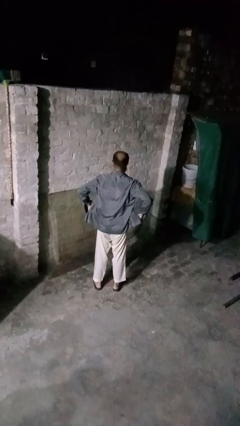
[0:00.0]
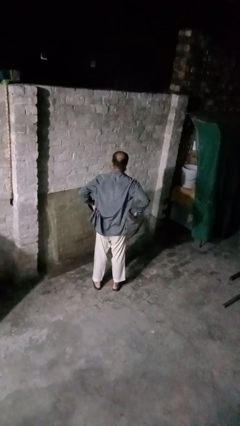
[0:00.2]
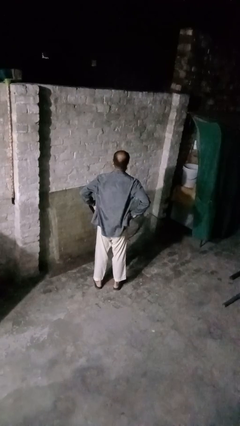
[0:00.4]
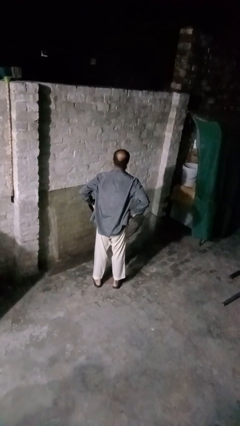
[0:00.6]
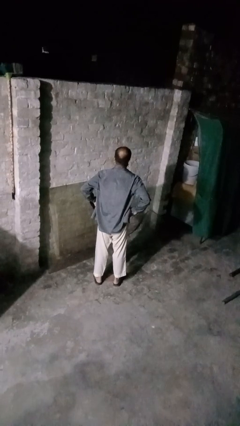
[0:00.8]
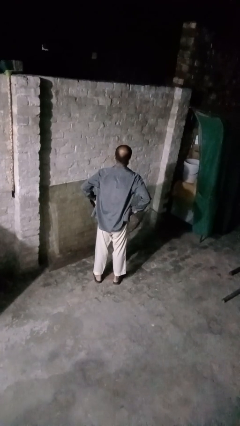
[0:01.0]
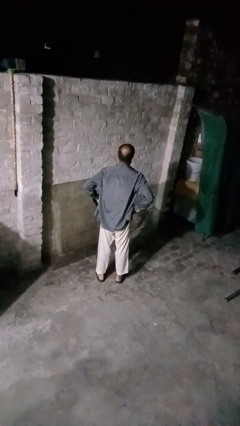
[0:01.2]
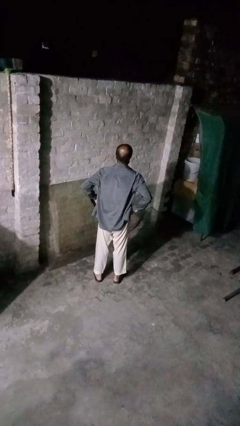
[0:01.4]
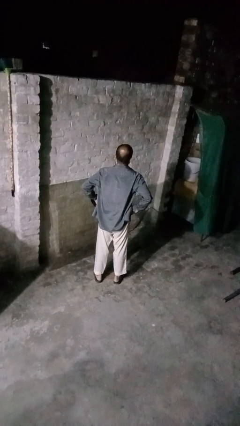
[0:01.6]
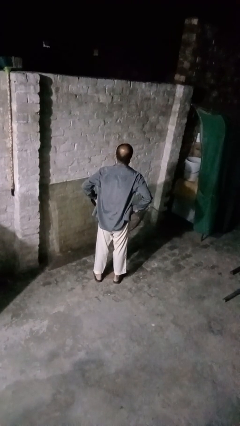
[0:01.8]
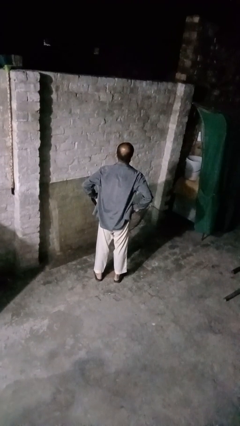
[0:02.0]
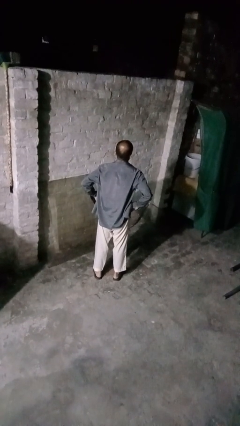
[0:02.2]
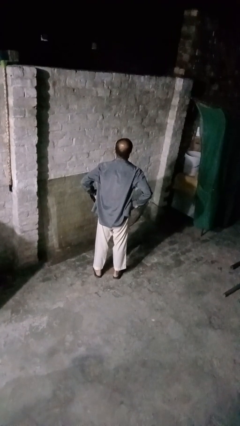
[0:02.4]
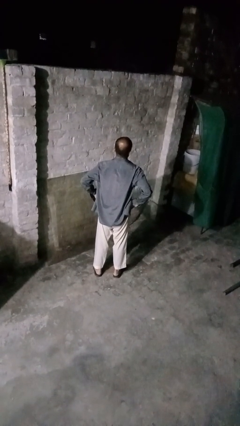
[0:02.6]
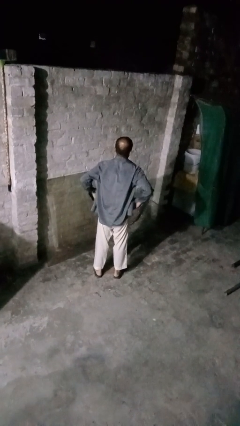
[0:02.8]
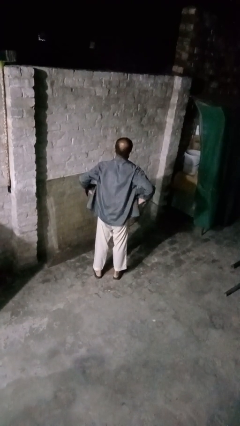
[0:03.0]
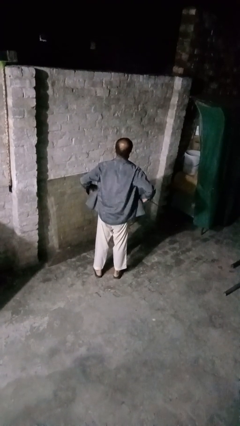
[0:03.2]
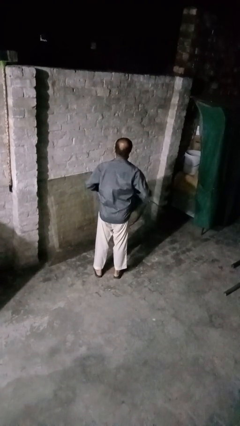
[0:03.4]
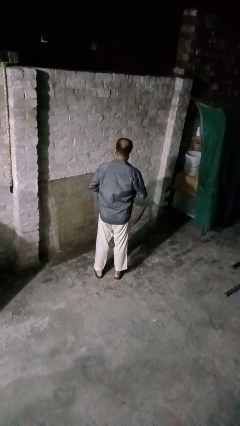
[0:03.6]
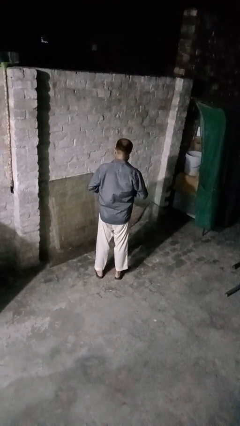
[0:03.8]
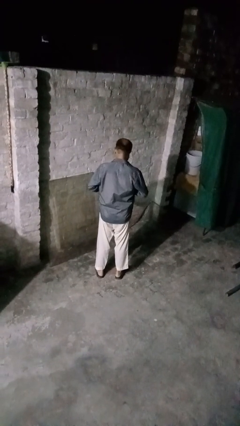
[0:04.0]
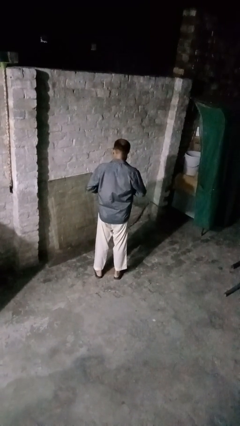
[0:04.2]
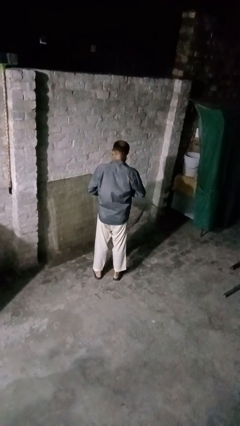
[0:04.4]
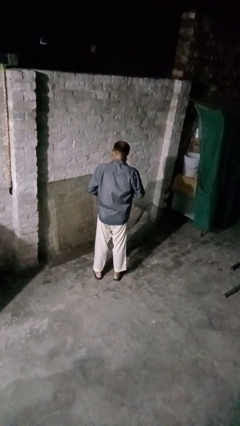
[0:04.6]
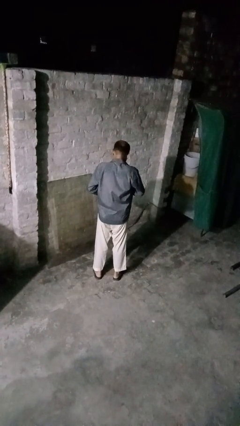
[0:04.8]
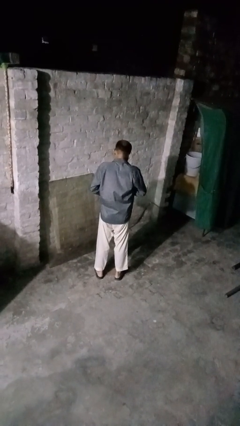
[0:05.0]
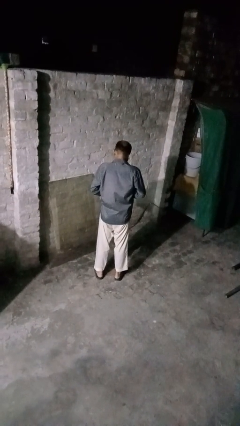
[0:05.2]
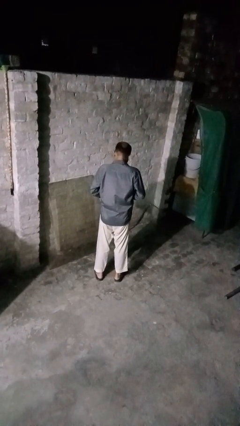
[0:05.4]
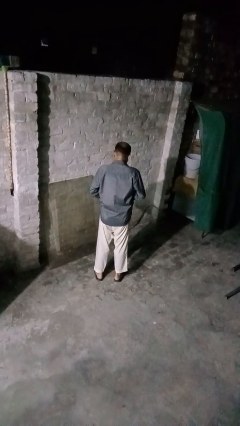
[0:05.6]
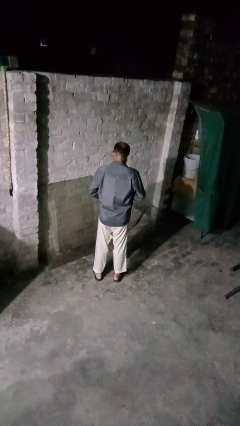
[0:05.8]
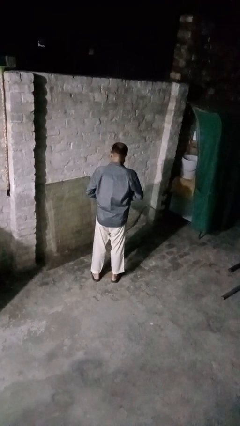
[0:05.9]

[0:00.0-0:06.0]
person buttons shirt

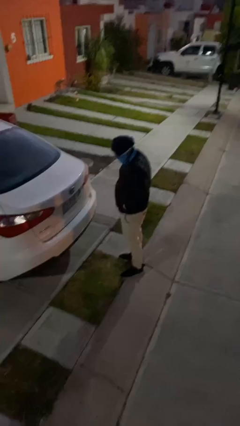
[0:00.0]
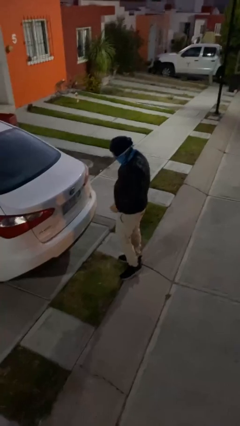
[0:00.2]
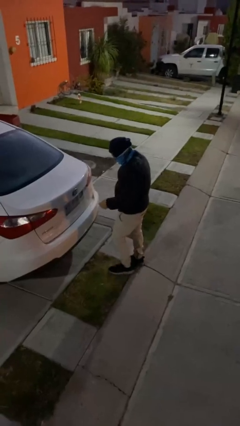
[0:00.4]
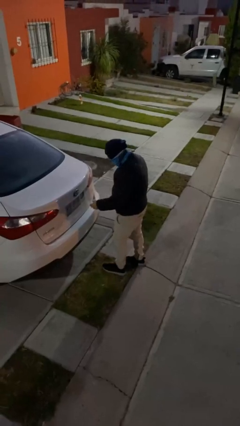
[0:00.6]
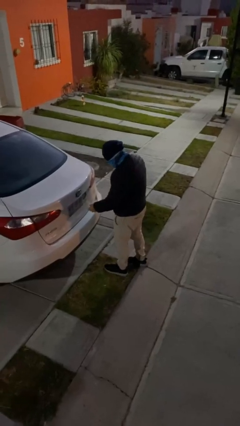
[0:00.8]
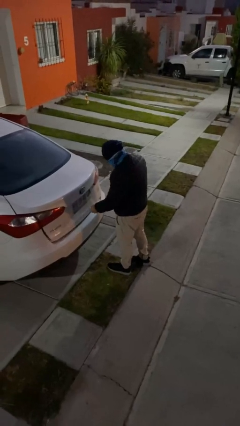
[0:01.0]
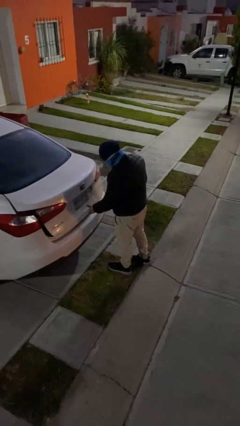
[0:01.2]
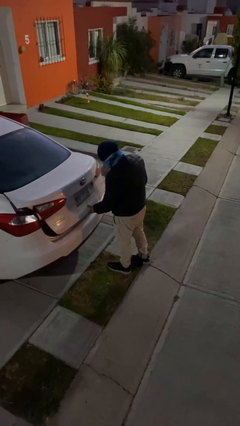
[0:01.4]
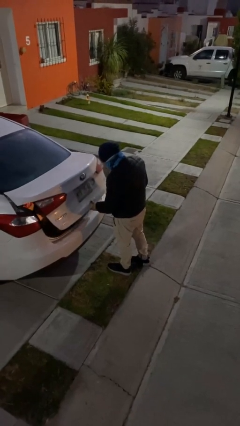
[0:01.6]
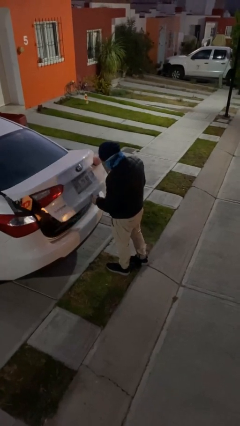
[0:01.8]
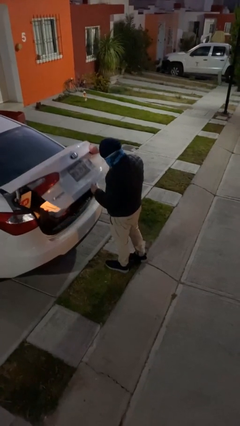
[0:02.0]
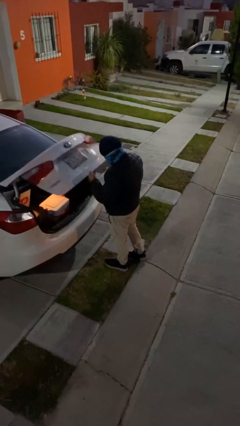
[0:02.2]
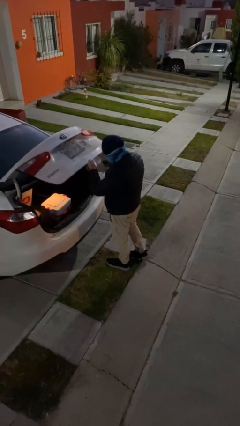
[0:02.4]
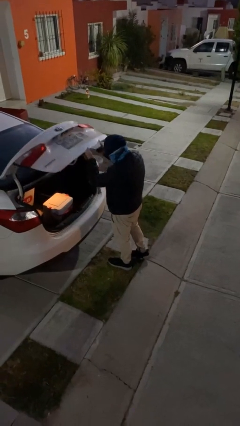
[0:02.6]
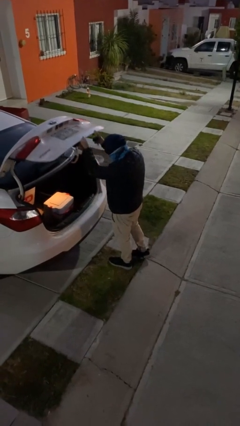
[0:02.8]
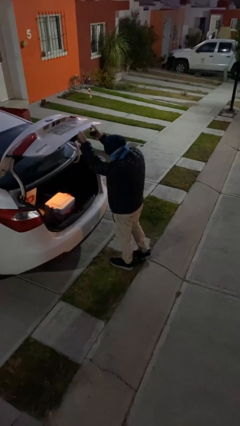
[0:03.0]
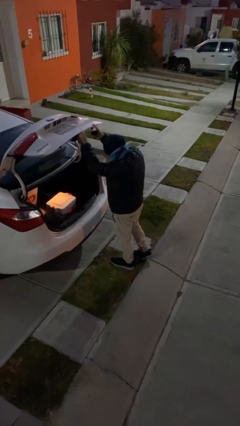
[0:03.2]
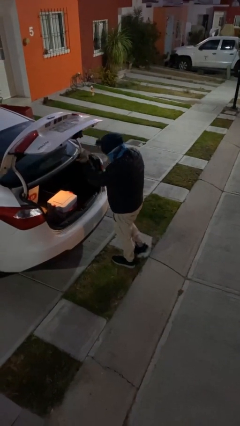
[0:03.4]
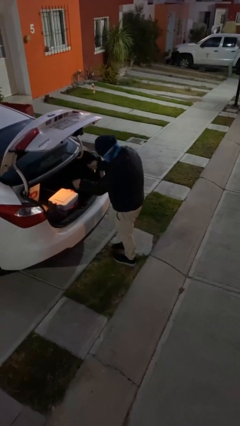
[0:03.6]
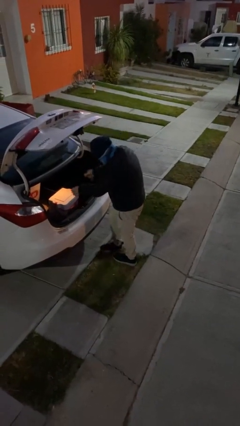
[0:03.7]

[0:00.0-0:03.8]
person opens car trunk

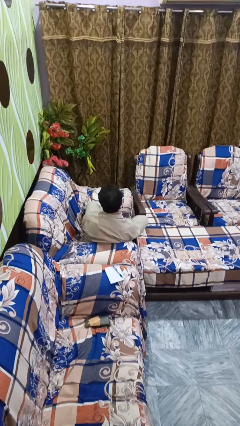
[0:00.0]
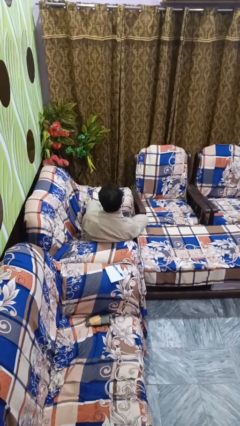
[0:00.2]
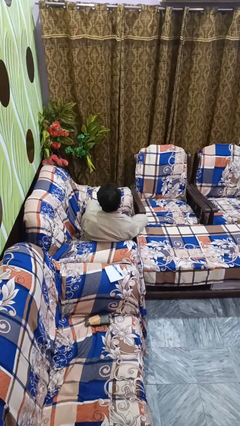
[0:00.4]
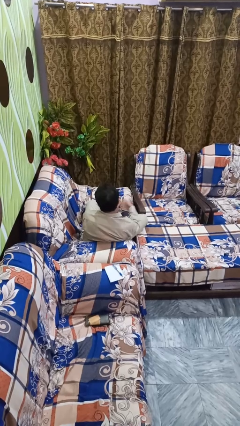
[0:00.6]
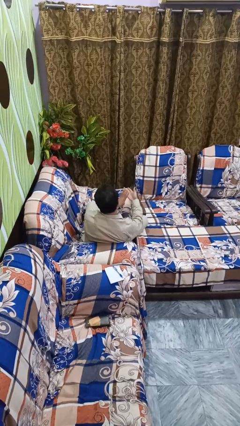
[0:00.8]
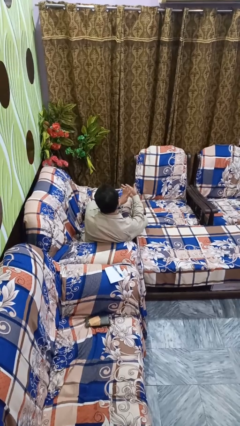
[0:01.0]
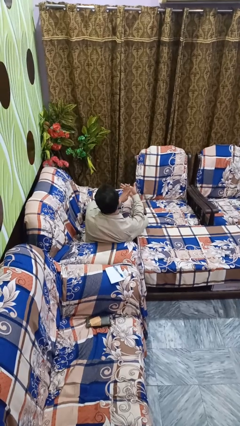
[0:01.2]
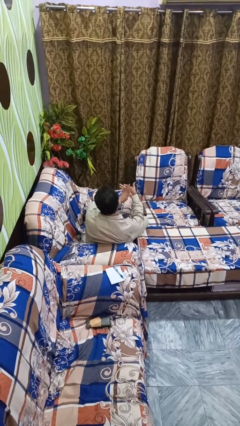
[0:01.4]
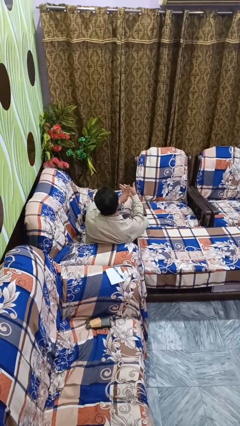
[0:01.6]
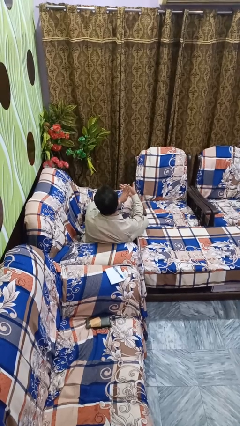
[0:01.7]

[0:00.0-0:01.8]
person gestures number four

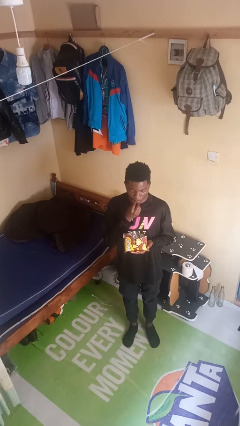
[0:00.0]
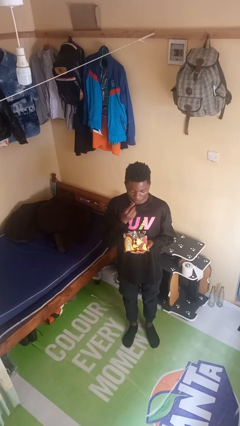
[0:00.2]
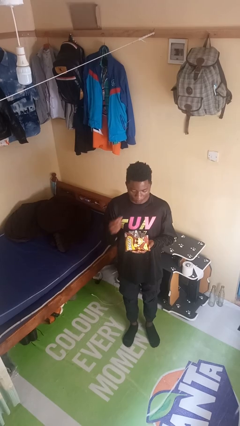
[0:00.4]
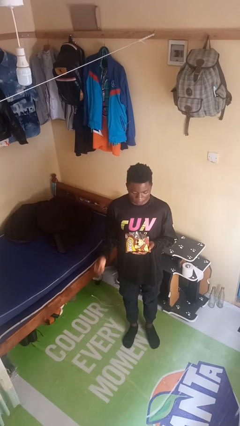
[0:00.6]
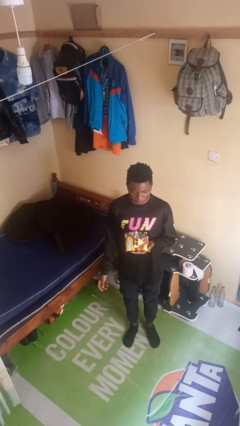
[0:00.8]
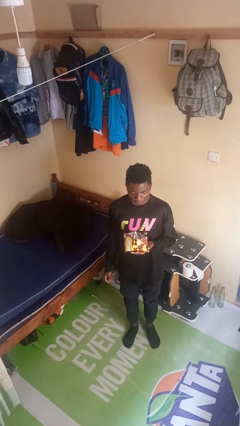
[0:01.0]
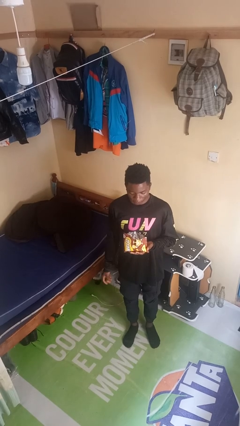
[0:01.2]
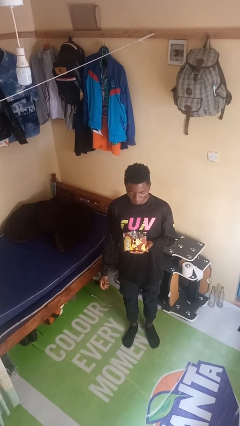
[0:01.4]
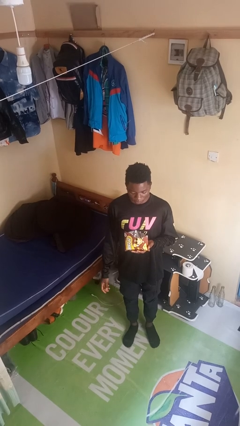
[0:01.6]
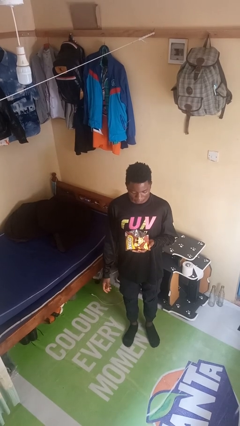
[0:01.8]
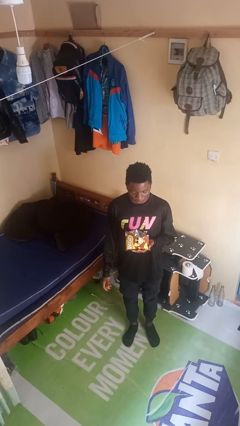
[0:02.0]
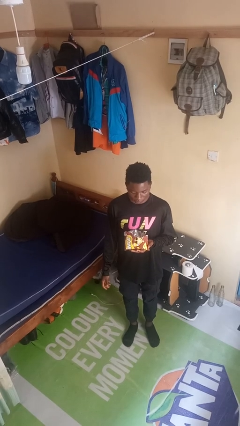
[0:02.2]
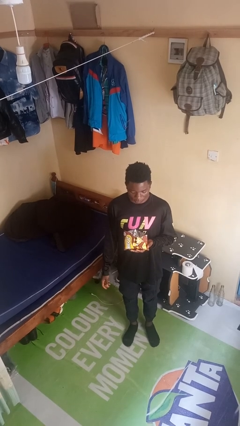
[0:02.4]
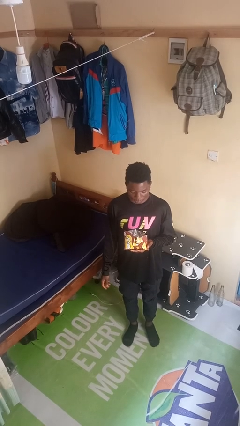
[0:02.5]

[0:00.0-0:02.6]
person eats snack from bag

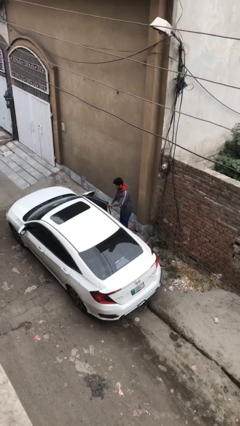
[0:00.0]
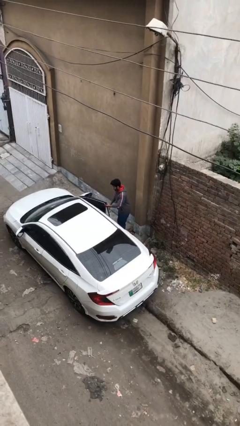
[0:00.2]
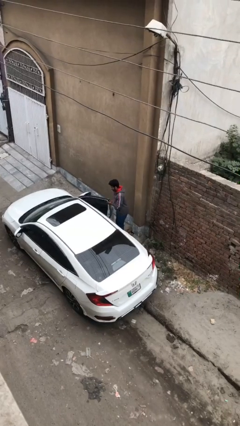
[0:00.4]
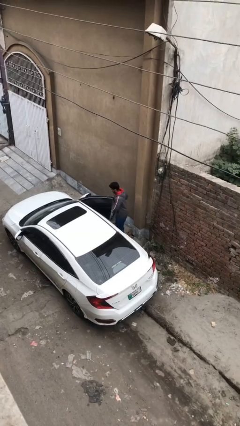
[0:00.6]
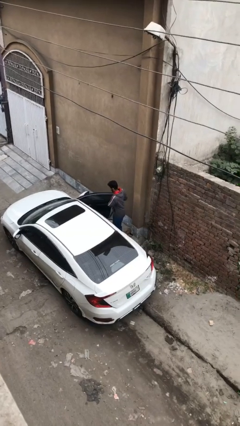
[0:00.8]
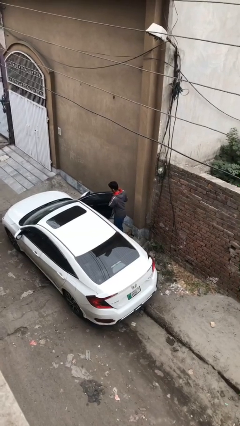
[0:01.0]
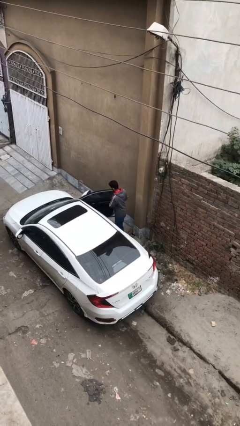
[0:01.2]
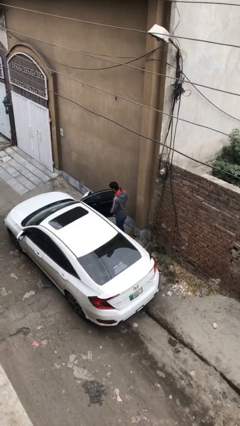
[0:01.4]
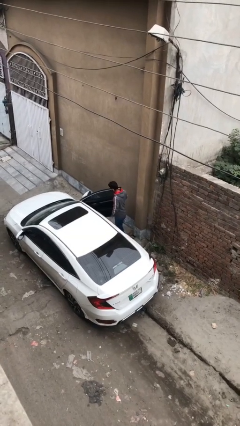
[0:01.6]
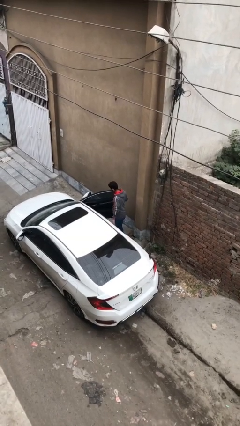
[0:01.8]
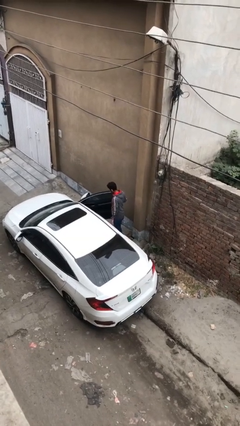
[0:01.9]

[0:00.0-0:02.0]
person opens car door

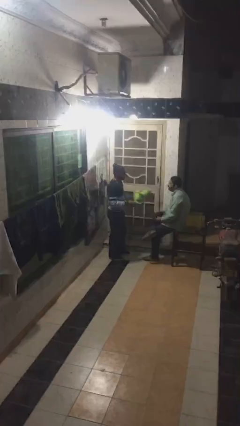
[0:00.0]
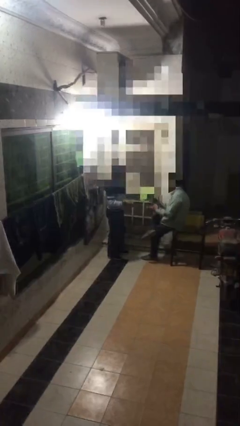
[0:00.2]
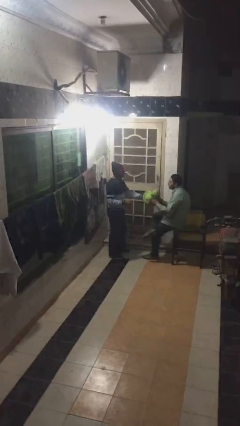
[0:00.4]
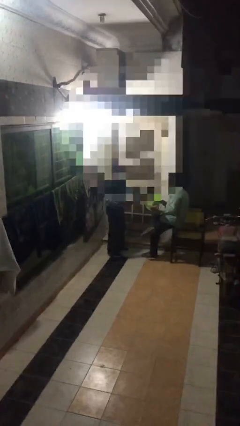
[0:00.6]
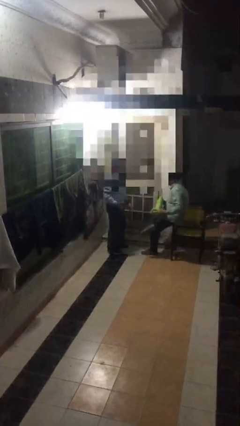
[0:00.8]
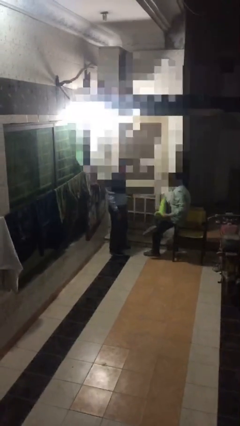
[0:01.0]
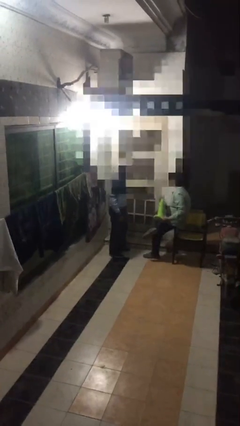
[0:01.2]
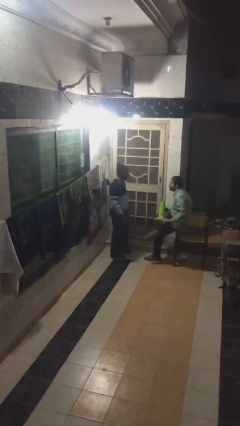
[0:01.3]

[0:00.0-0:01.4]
person transfers object to person
